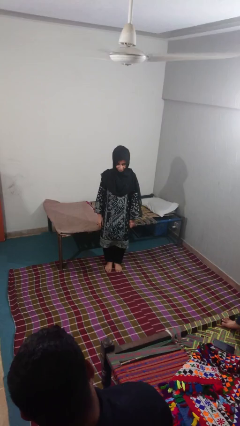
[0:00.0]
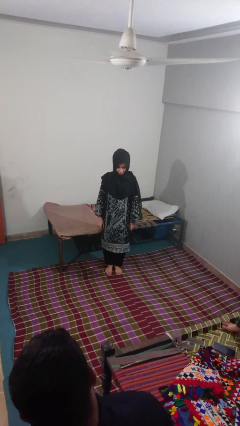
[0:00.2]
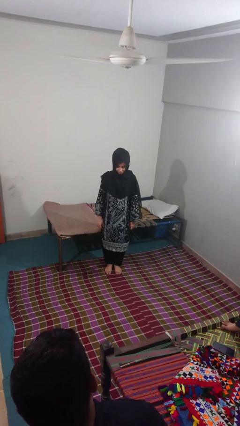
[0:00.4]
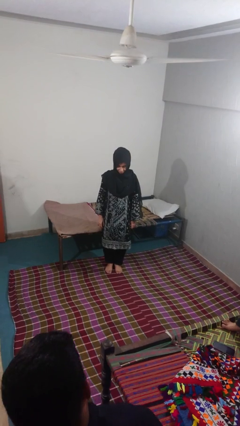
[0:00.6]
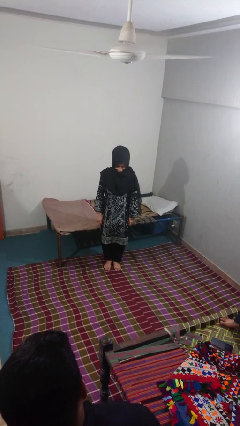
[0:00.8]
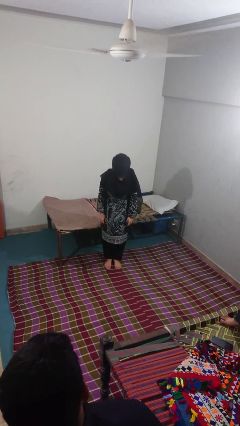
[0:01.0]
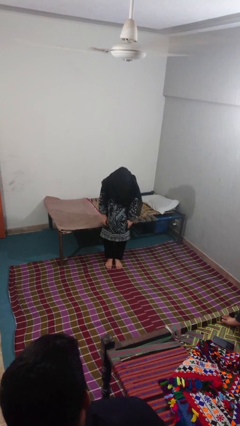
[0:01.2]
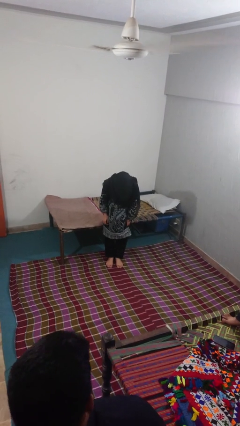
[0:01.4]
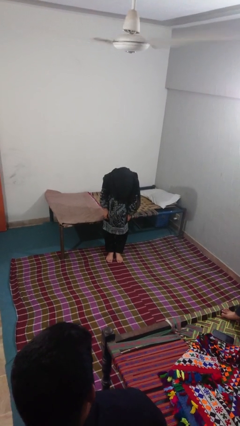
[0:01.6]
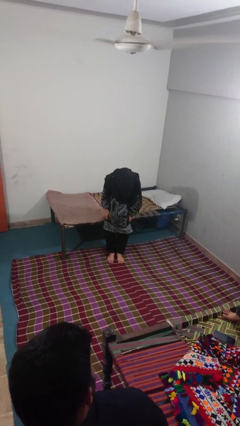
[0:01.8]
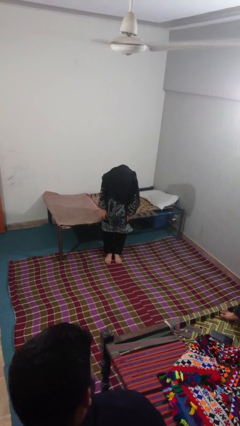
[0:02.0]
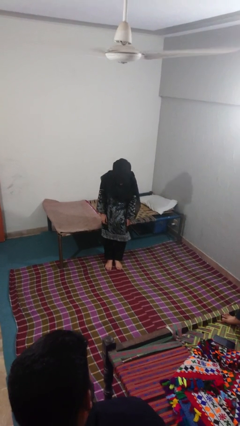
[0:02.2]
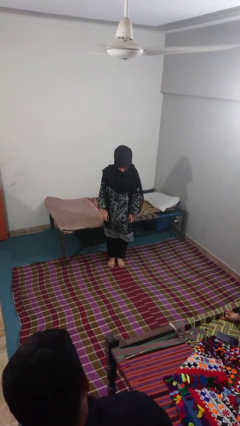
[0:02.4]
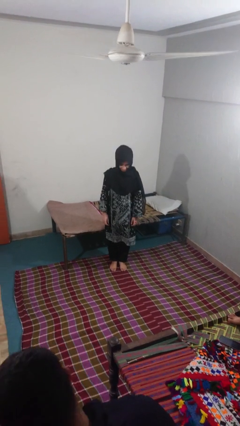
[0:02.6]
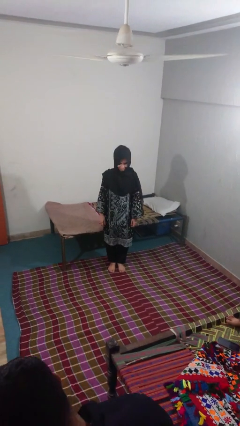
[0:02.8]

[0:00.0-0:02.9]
person bows

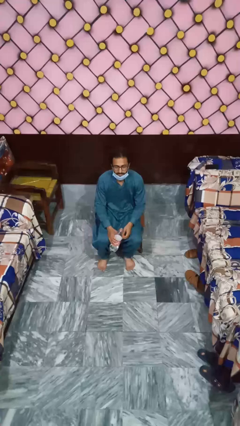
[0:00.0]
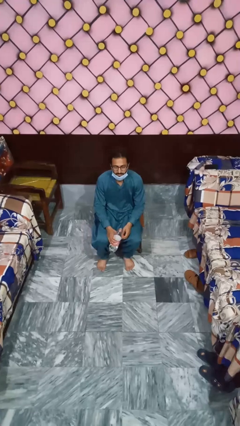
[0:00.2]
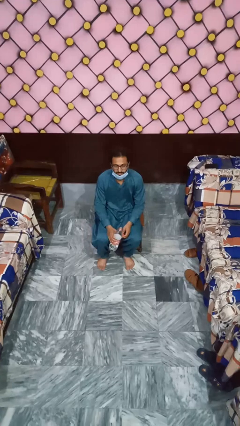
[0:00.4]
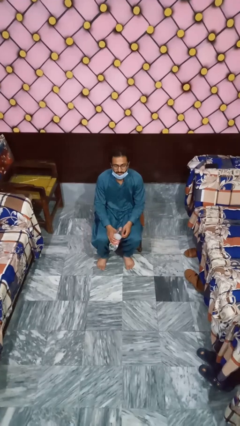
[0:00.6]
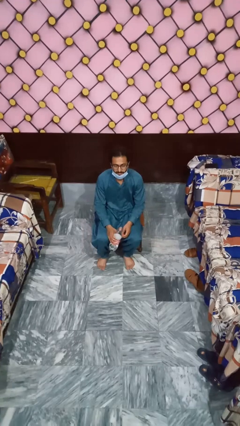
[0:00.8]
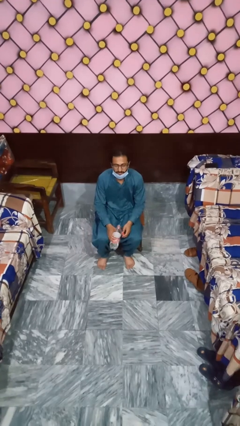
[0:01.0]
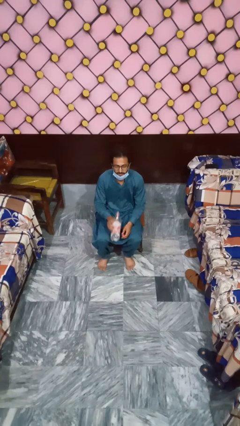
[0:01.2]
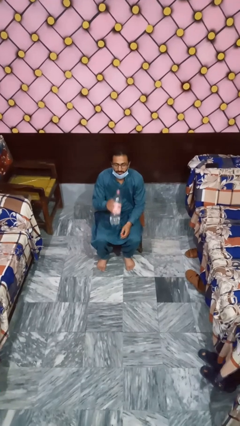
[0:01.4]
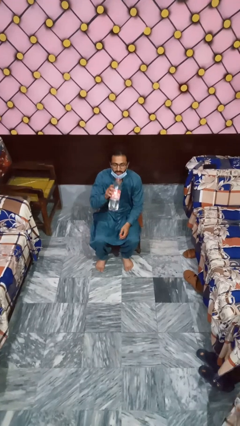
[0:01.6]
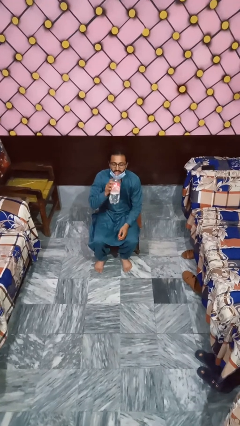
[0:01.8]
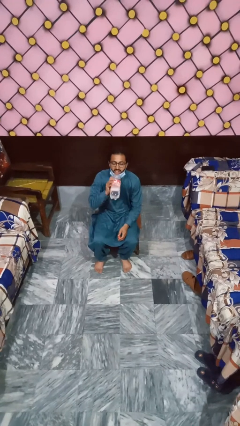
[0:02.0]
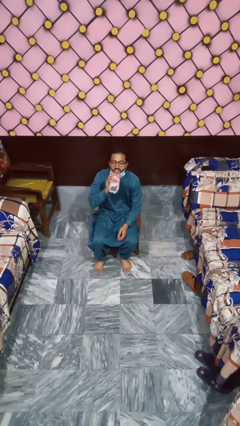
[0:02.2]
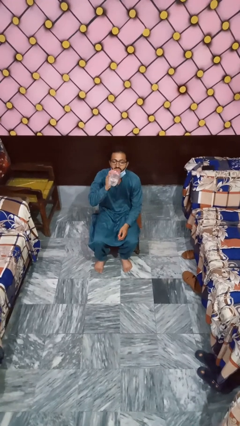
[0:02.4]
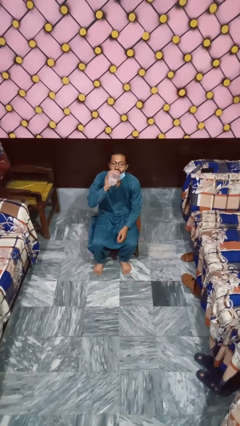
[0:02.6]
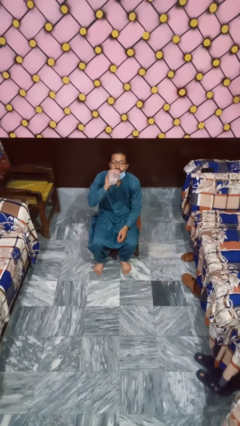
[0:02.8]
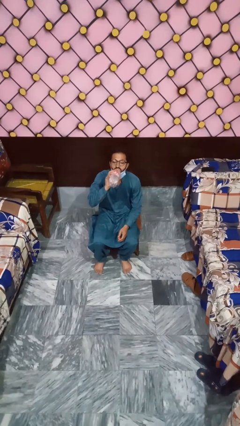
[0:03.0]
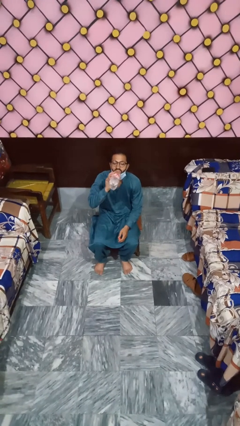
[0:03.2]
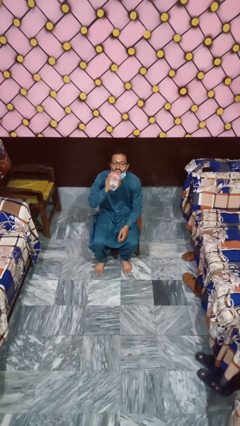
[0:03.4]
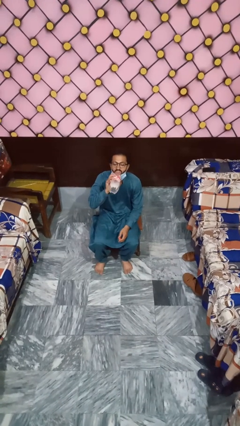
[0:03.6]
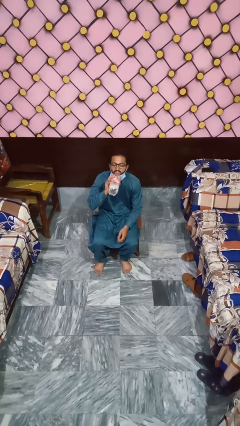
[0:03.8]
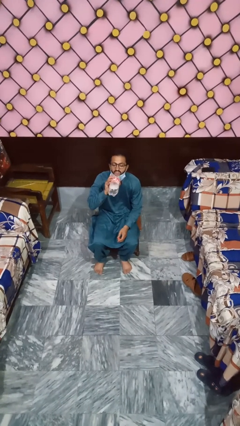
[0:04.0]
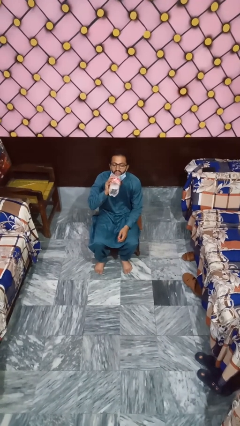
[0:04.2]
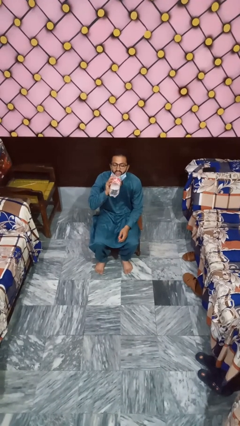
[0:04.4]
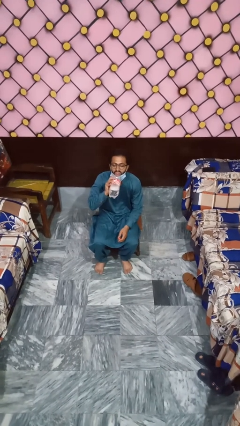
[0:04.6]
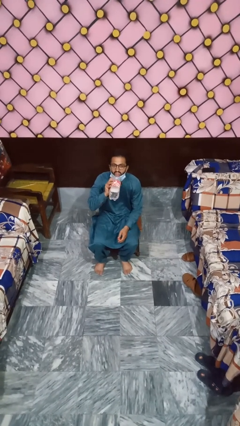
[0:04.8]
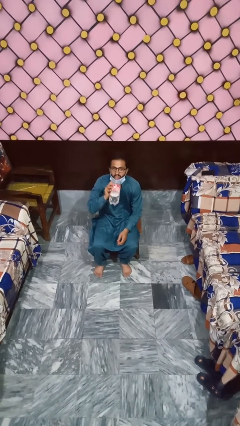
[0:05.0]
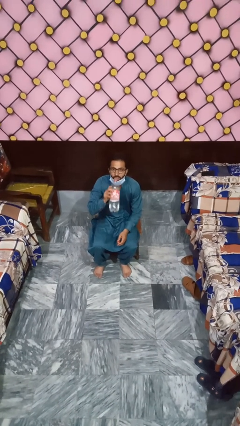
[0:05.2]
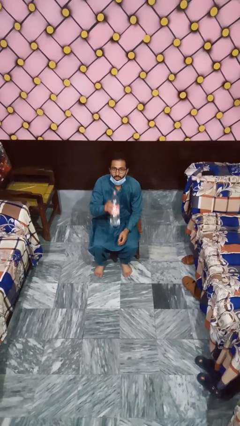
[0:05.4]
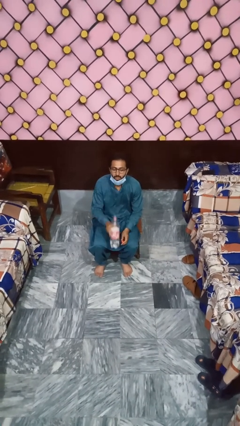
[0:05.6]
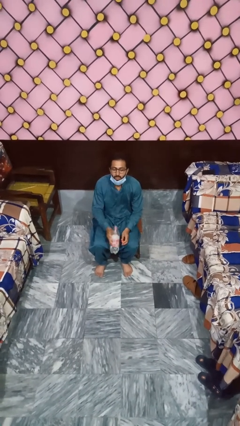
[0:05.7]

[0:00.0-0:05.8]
person drinks from bottle

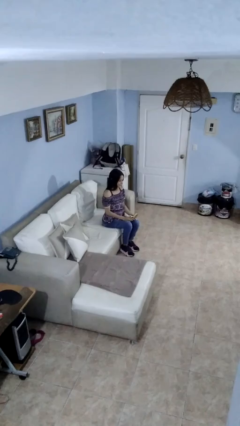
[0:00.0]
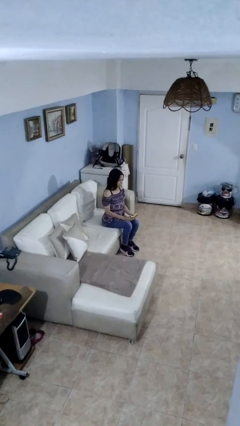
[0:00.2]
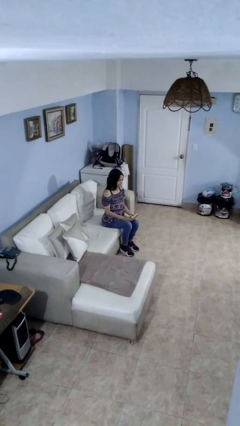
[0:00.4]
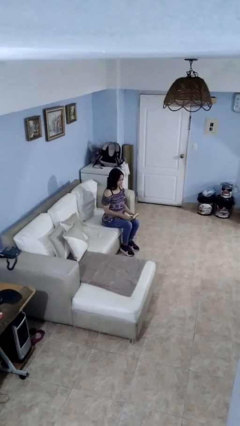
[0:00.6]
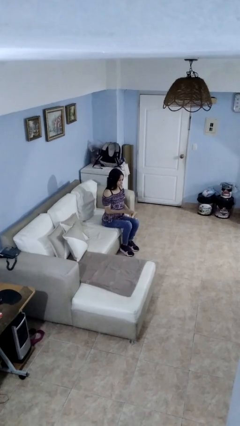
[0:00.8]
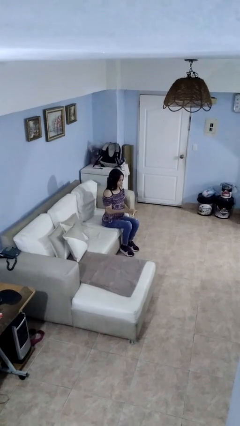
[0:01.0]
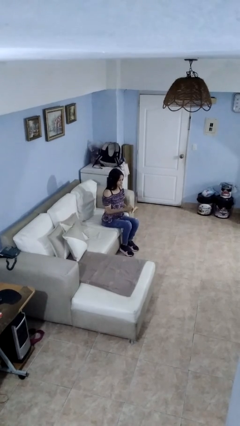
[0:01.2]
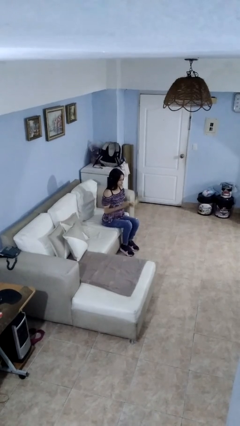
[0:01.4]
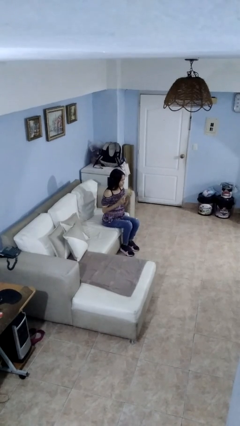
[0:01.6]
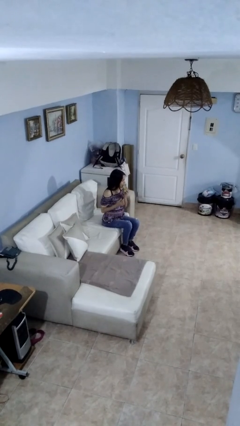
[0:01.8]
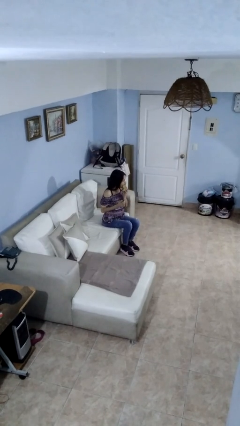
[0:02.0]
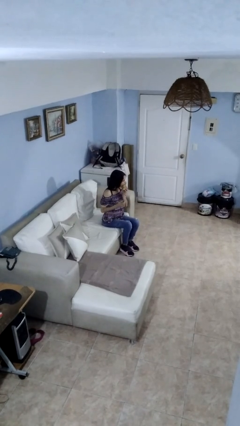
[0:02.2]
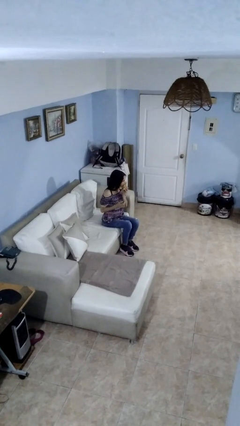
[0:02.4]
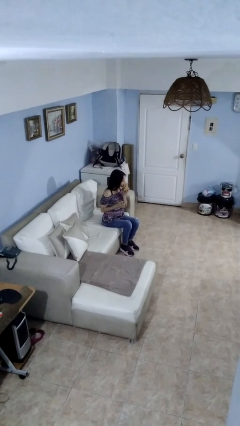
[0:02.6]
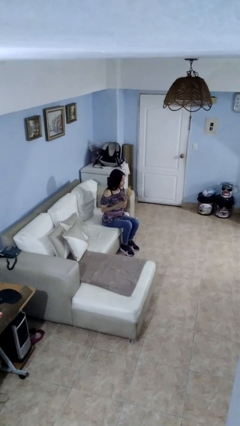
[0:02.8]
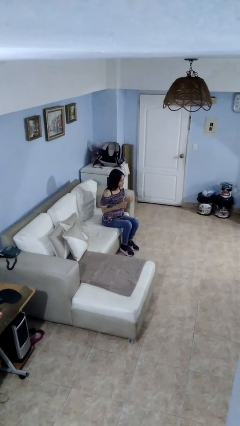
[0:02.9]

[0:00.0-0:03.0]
person eats banana

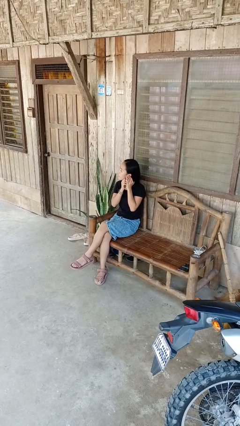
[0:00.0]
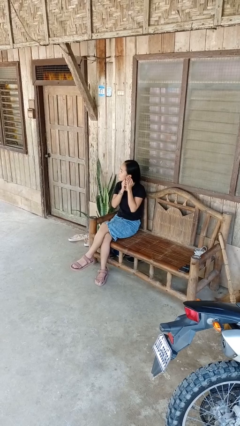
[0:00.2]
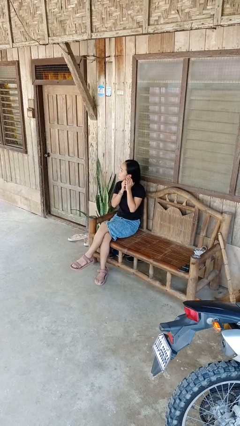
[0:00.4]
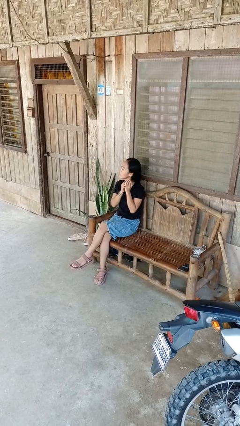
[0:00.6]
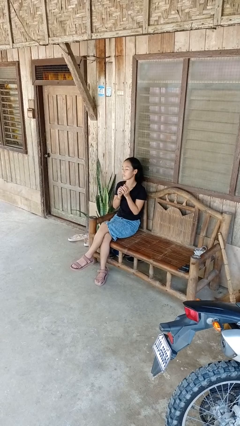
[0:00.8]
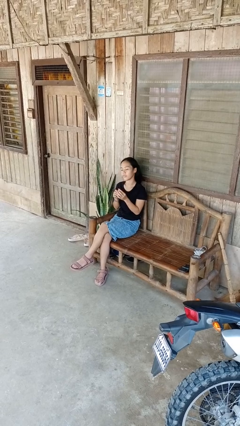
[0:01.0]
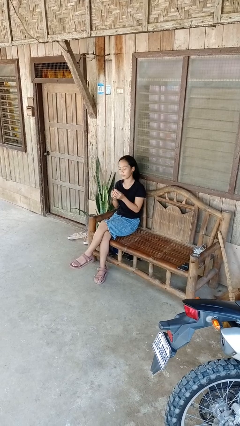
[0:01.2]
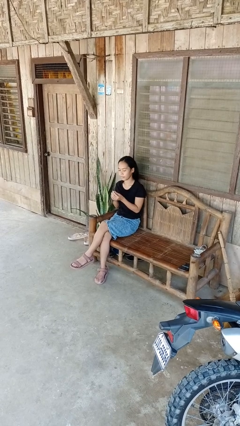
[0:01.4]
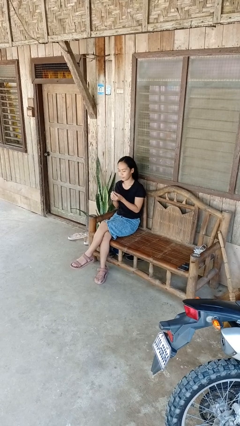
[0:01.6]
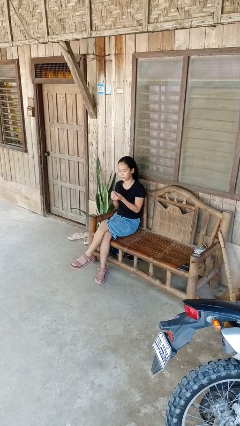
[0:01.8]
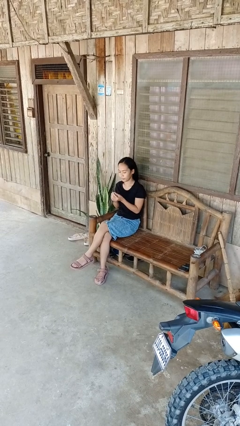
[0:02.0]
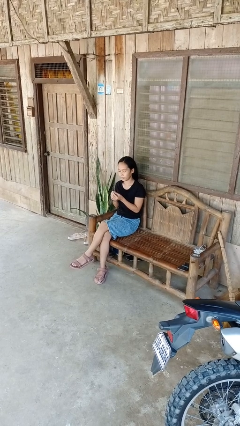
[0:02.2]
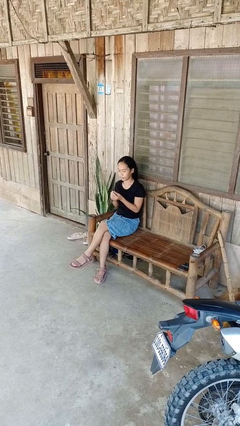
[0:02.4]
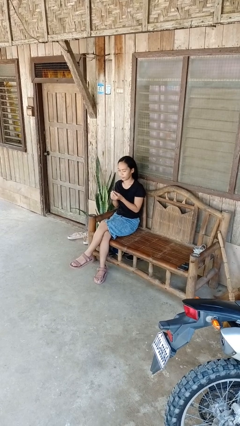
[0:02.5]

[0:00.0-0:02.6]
person takes off earrings

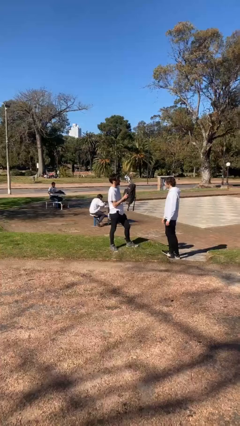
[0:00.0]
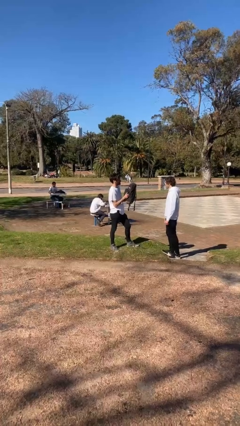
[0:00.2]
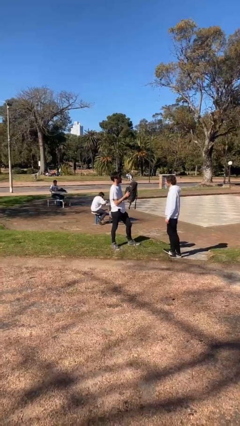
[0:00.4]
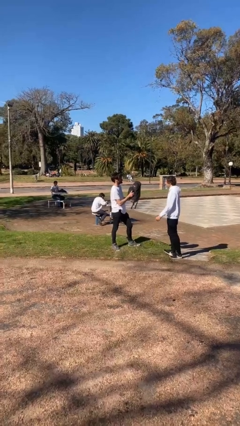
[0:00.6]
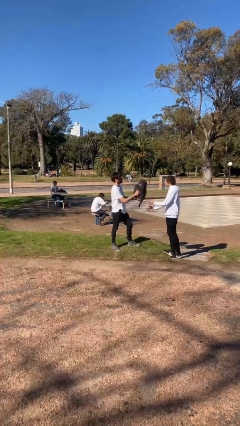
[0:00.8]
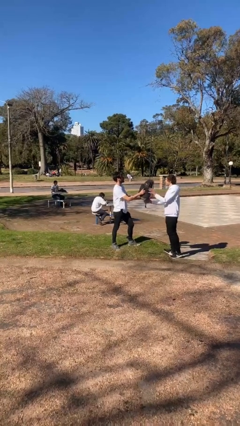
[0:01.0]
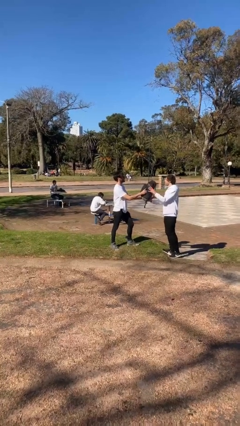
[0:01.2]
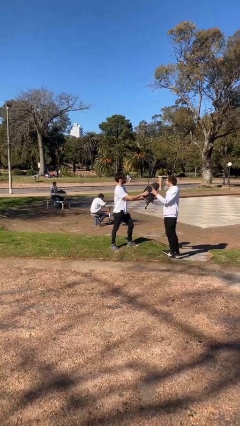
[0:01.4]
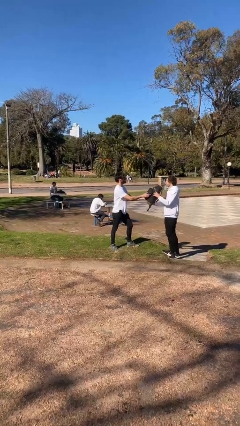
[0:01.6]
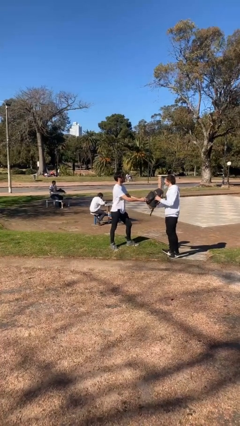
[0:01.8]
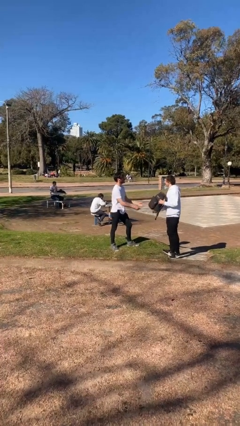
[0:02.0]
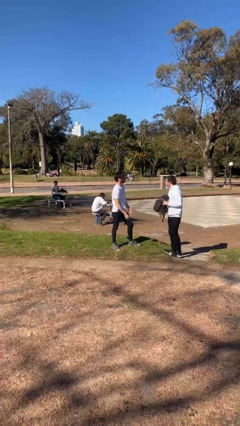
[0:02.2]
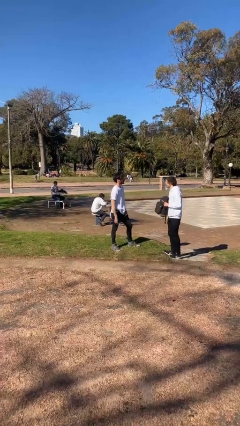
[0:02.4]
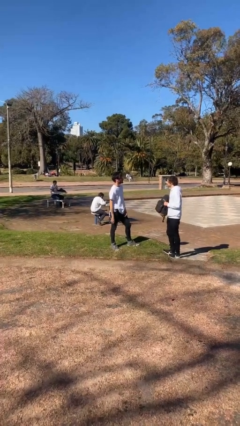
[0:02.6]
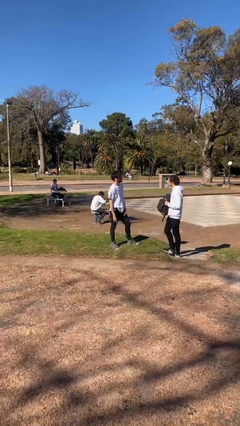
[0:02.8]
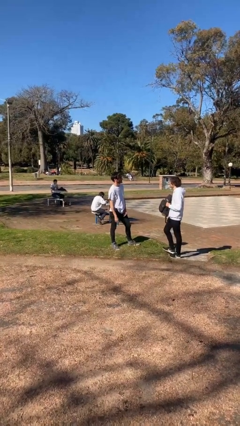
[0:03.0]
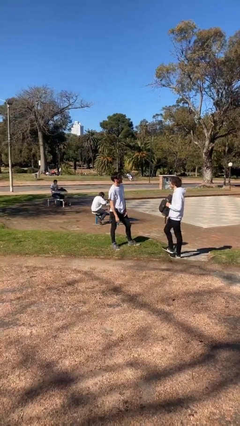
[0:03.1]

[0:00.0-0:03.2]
person transfers object to person

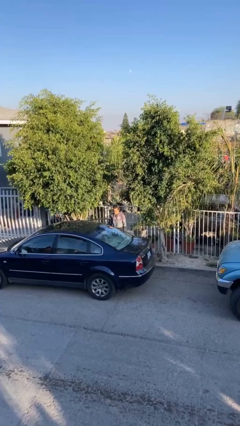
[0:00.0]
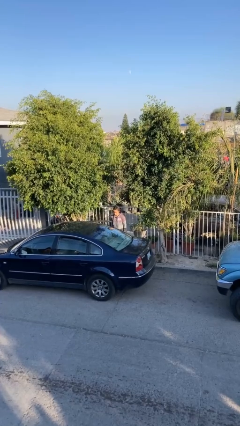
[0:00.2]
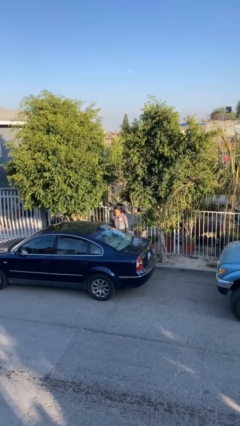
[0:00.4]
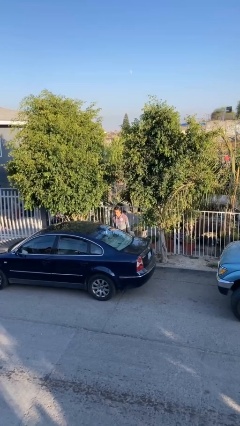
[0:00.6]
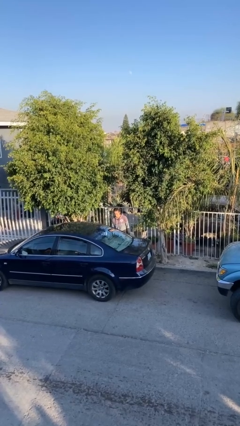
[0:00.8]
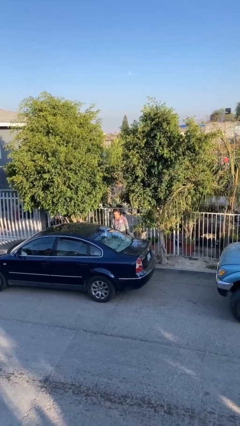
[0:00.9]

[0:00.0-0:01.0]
person closes car door
